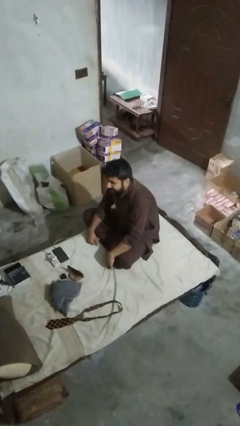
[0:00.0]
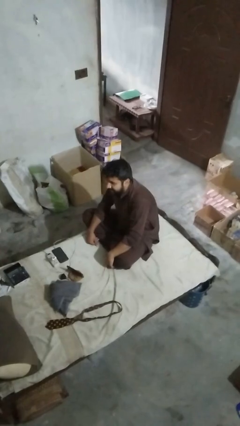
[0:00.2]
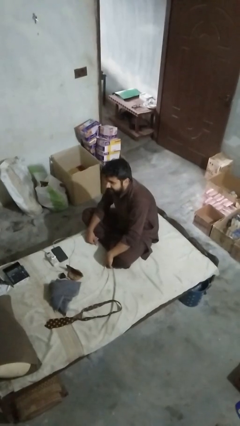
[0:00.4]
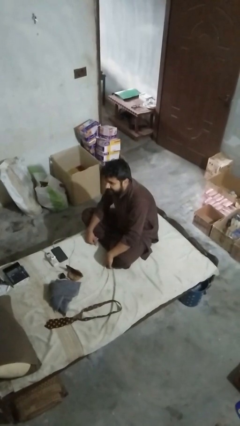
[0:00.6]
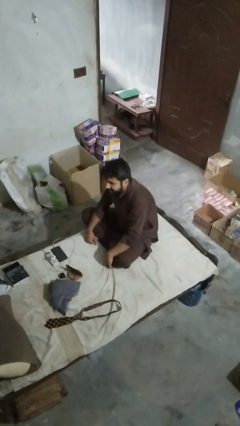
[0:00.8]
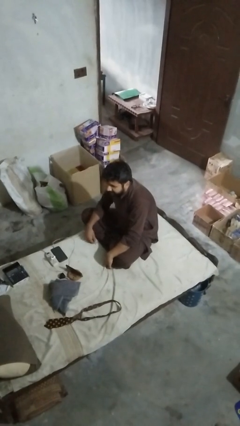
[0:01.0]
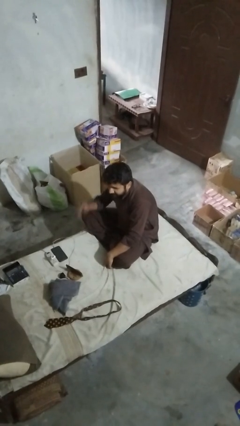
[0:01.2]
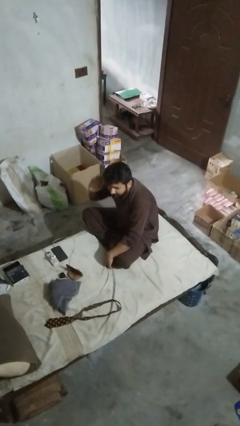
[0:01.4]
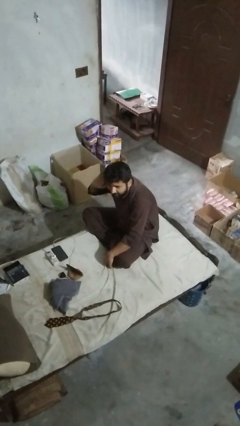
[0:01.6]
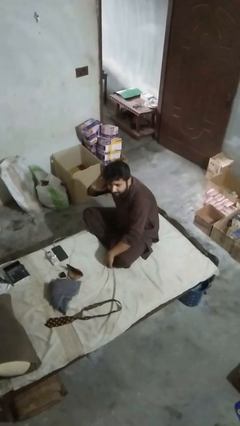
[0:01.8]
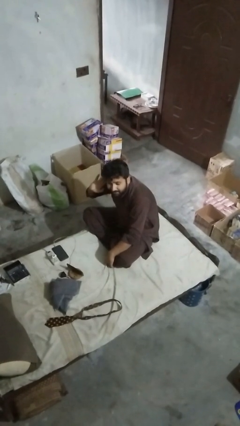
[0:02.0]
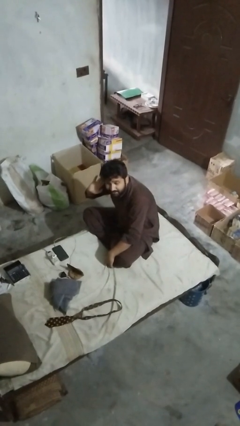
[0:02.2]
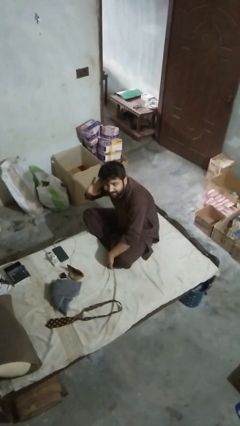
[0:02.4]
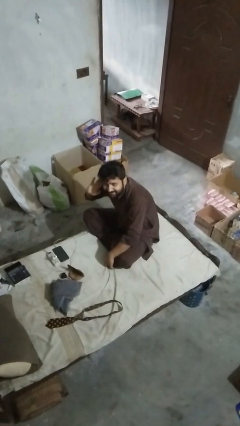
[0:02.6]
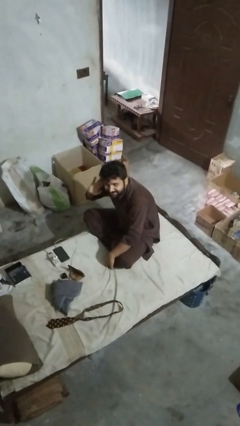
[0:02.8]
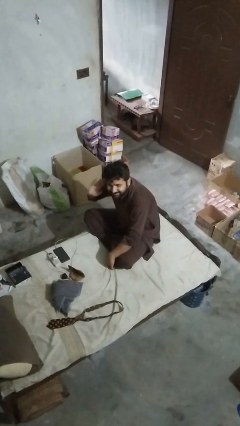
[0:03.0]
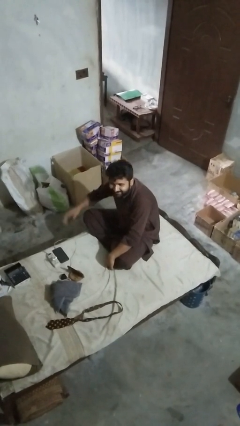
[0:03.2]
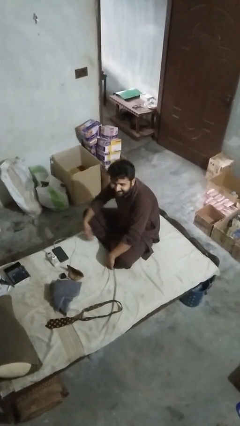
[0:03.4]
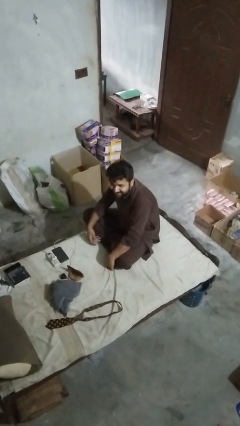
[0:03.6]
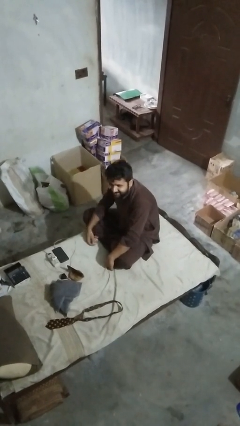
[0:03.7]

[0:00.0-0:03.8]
person gestures listen closely

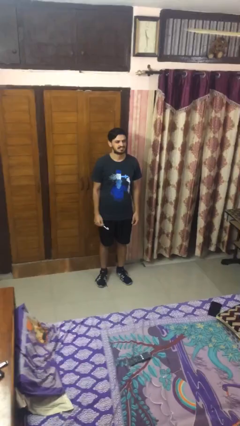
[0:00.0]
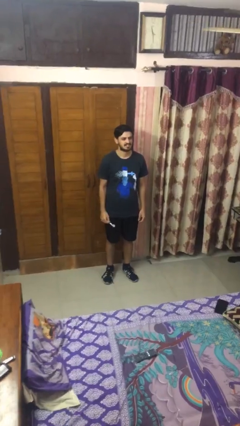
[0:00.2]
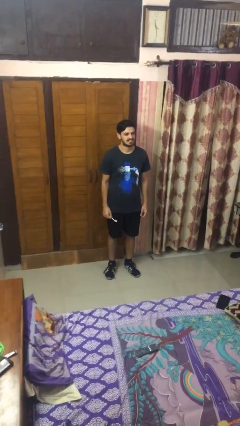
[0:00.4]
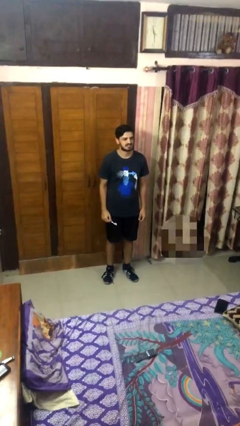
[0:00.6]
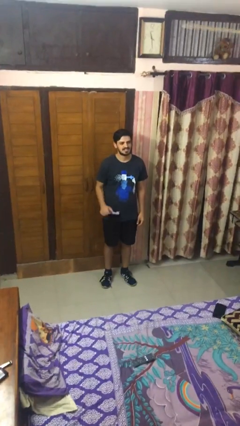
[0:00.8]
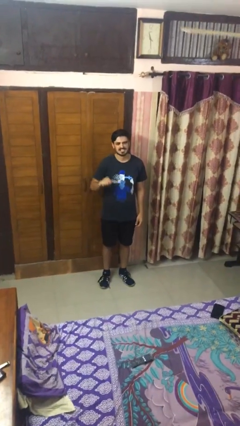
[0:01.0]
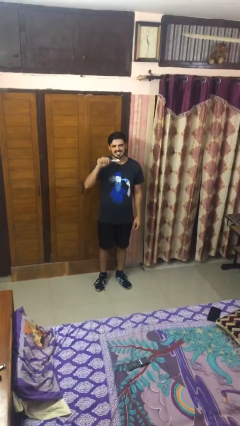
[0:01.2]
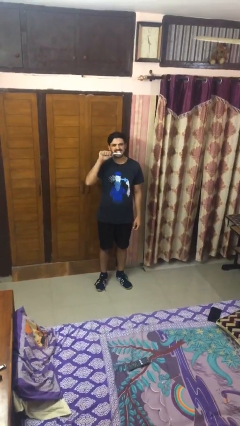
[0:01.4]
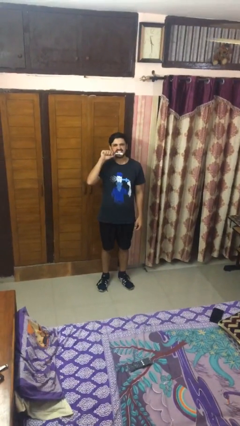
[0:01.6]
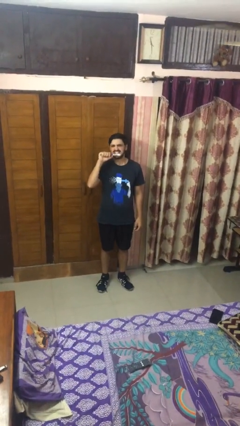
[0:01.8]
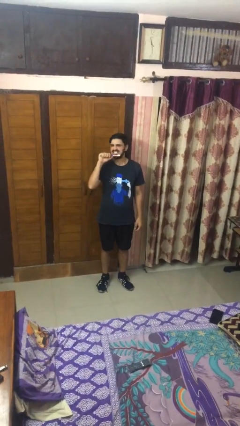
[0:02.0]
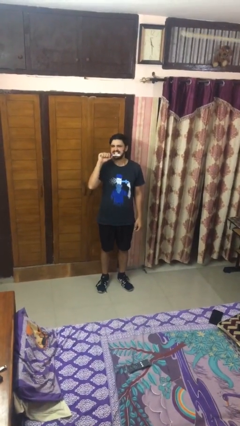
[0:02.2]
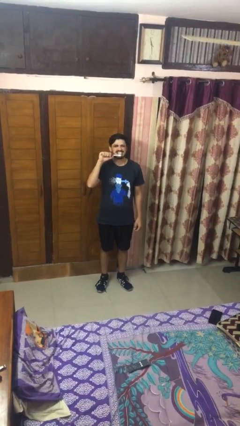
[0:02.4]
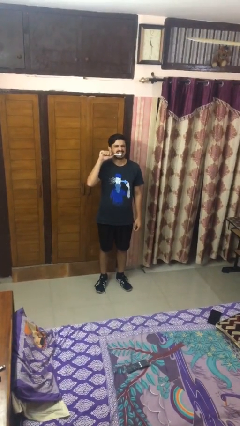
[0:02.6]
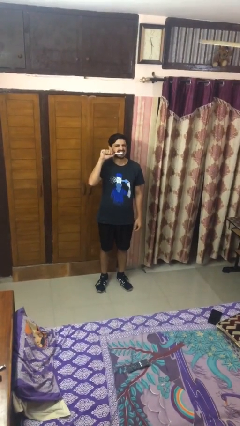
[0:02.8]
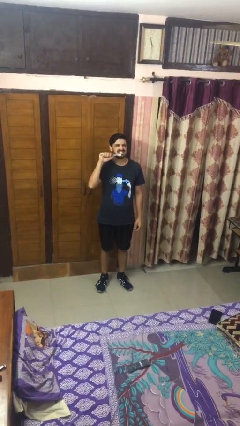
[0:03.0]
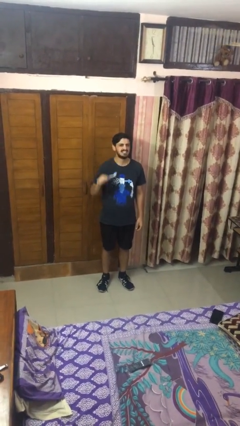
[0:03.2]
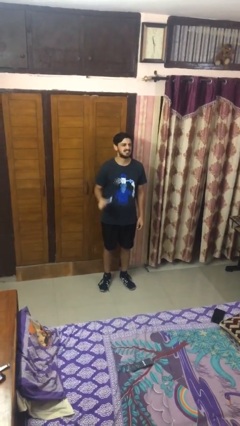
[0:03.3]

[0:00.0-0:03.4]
person brushes teeth

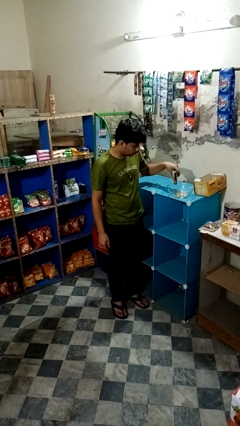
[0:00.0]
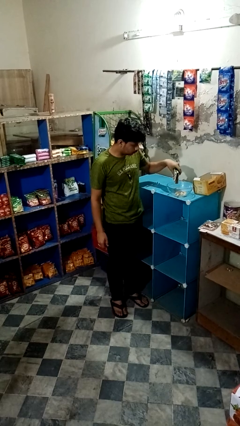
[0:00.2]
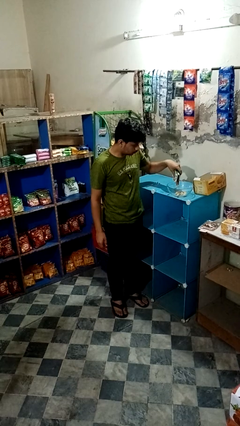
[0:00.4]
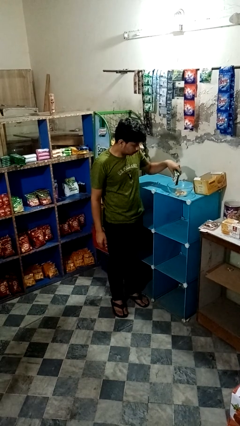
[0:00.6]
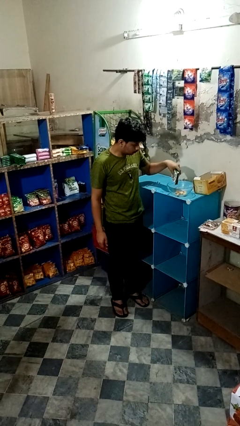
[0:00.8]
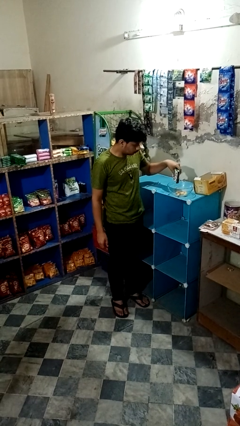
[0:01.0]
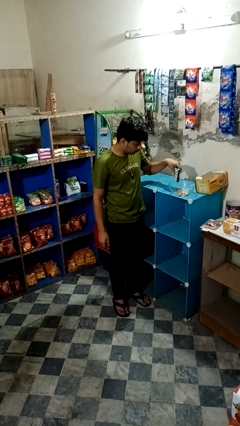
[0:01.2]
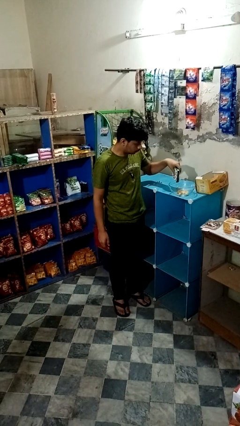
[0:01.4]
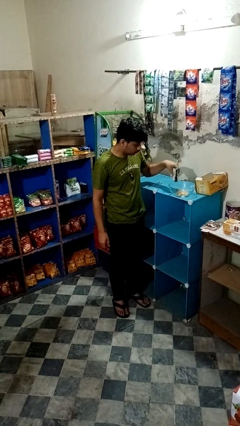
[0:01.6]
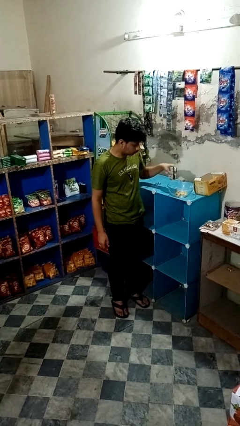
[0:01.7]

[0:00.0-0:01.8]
person pours into bowl

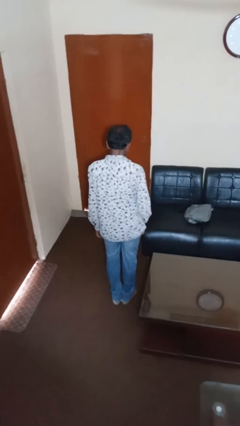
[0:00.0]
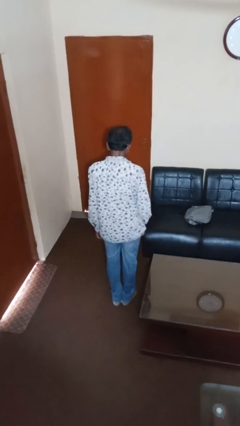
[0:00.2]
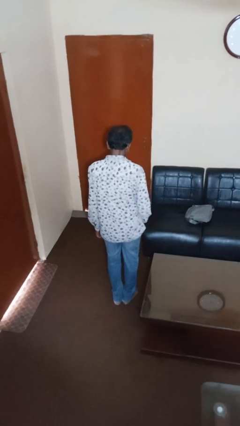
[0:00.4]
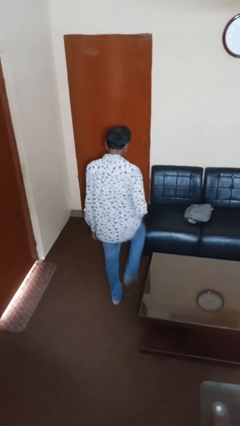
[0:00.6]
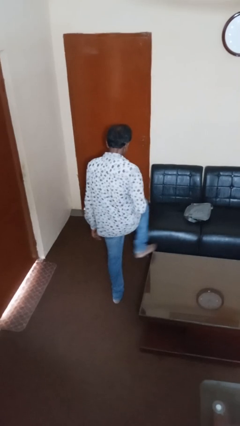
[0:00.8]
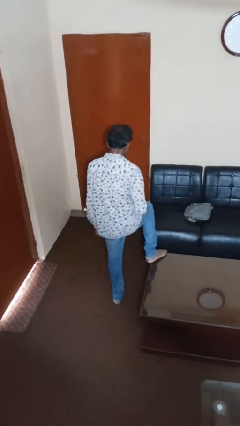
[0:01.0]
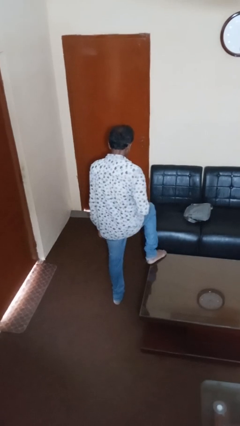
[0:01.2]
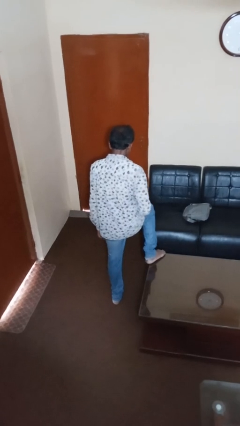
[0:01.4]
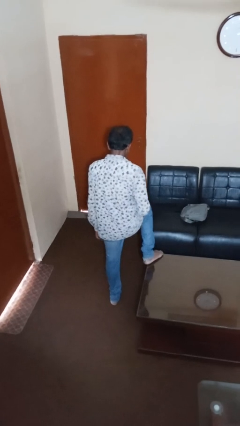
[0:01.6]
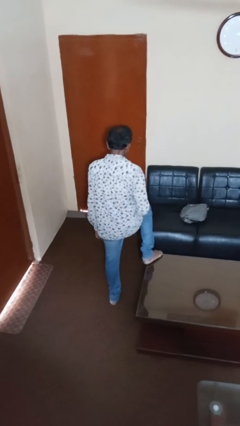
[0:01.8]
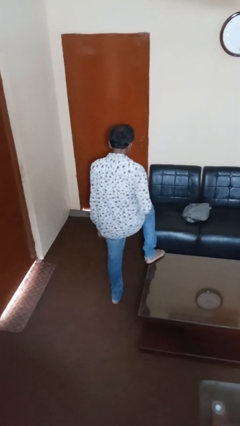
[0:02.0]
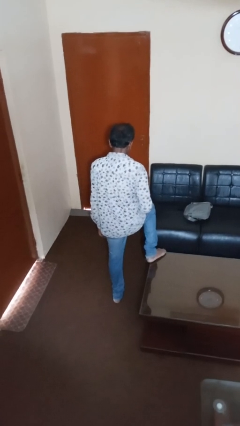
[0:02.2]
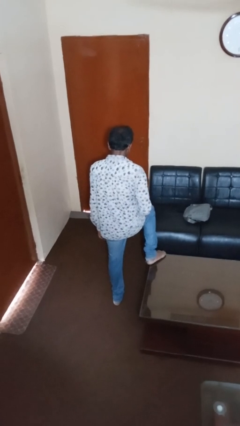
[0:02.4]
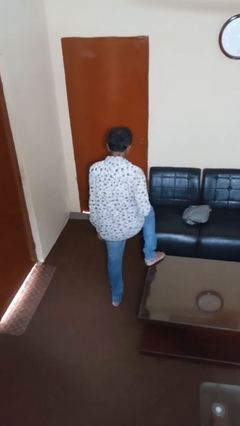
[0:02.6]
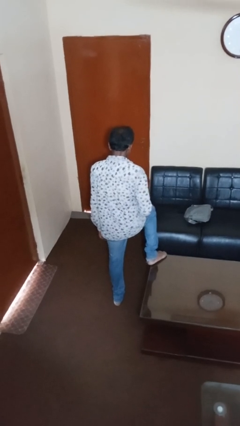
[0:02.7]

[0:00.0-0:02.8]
person puts feet up

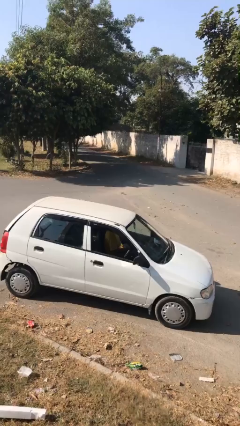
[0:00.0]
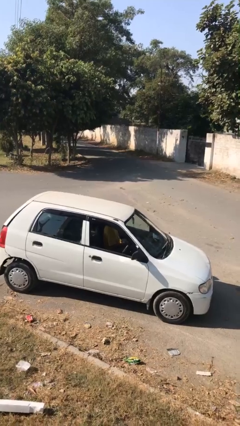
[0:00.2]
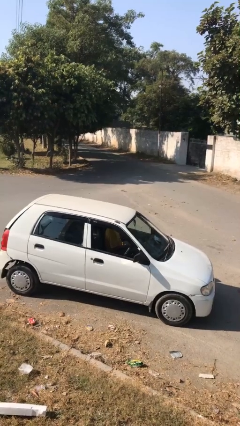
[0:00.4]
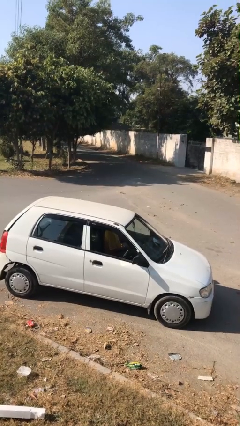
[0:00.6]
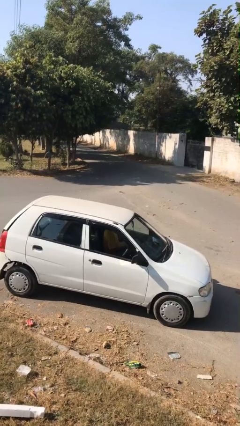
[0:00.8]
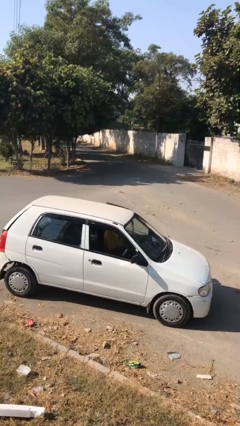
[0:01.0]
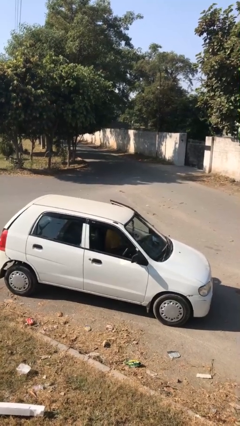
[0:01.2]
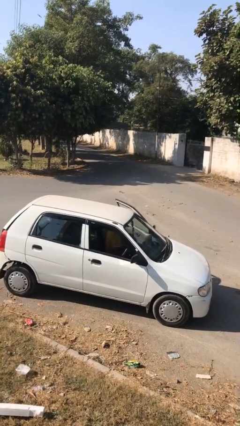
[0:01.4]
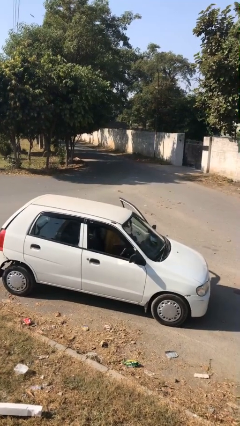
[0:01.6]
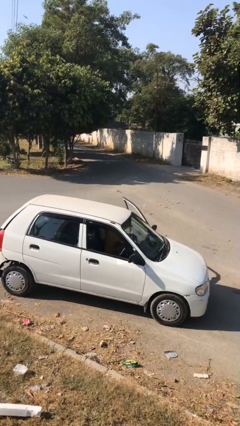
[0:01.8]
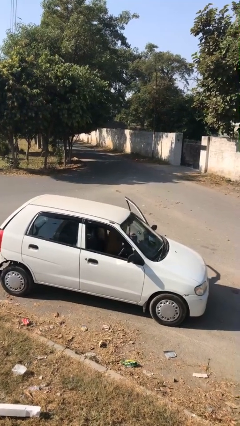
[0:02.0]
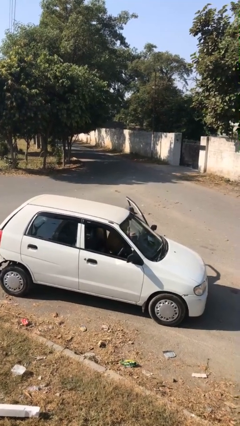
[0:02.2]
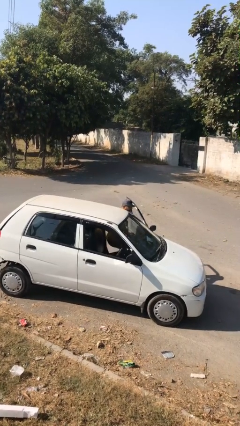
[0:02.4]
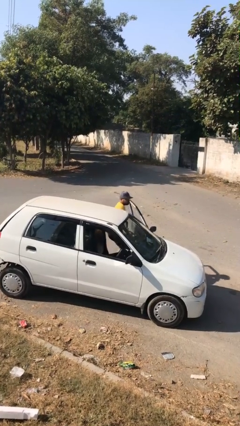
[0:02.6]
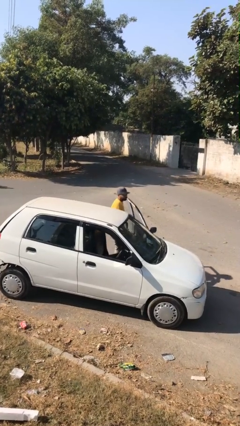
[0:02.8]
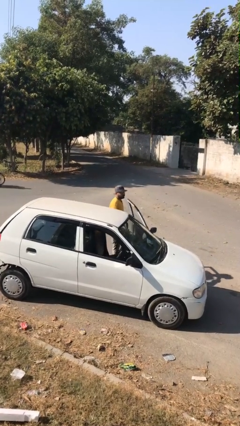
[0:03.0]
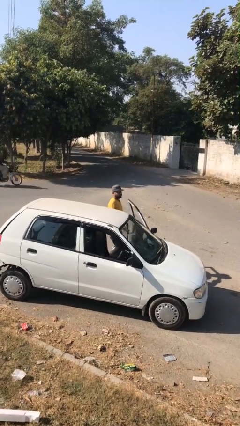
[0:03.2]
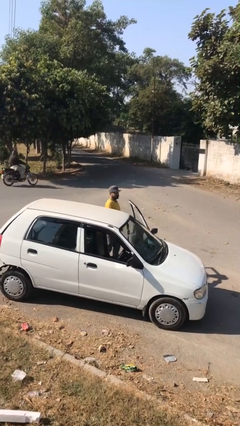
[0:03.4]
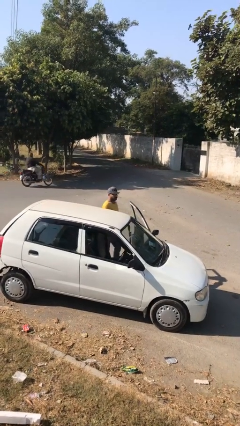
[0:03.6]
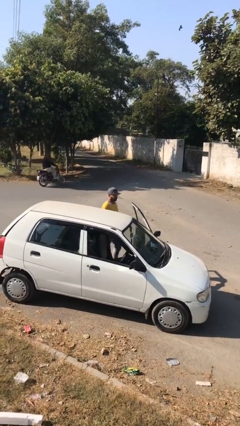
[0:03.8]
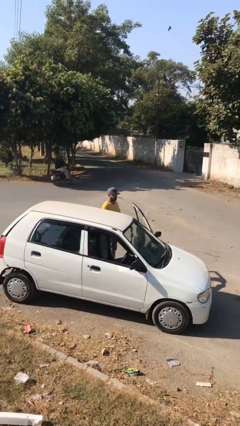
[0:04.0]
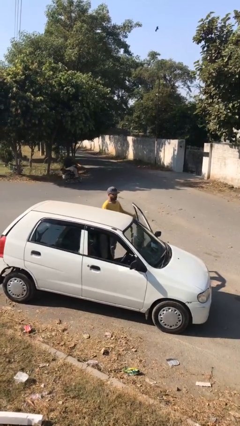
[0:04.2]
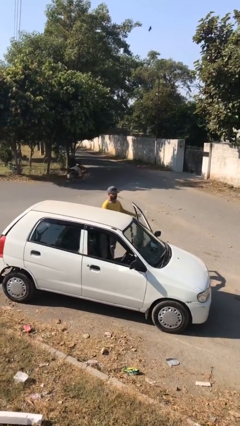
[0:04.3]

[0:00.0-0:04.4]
person exits car

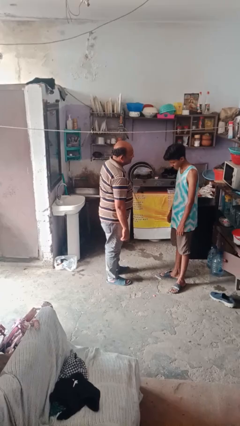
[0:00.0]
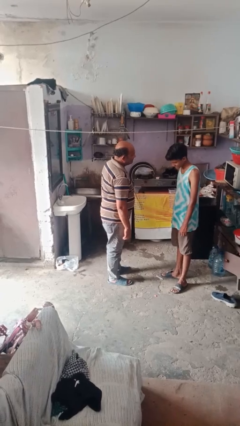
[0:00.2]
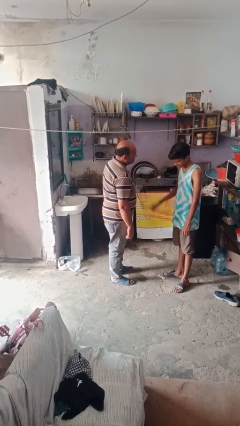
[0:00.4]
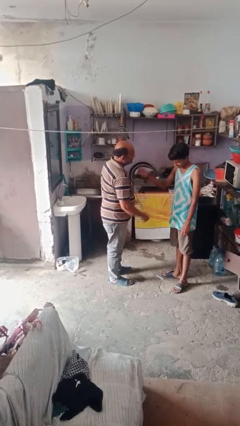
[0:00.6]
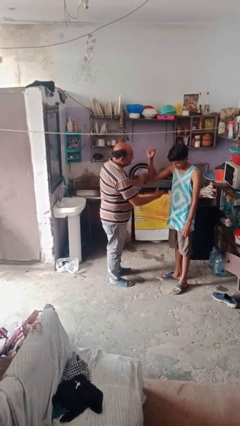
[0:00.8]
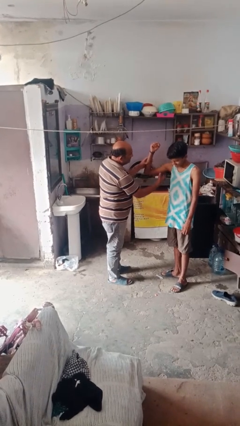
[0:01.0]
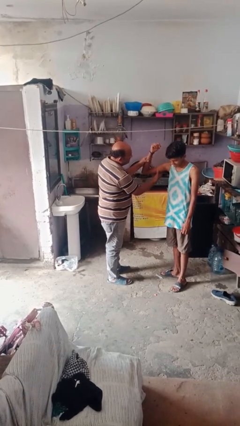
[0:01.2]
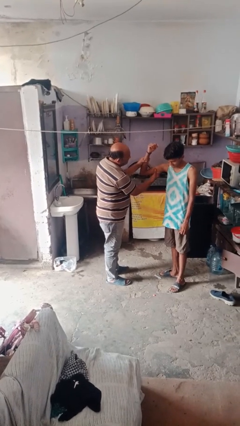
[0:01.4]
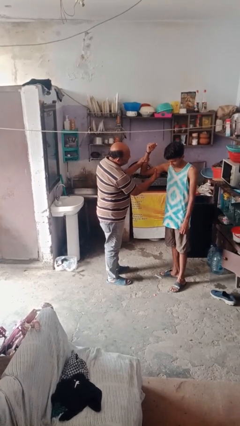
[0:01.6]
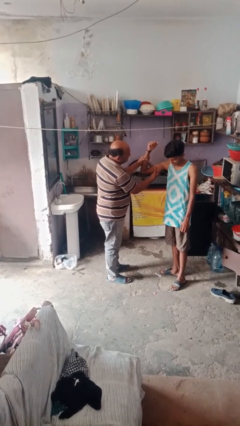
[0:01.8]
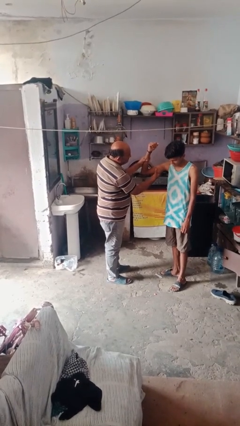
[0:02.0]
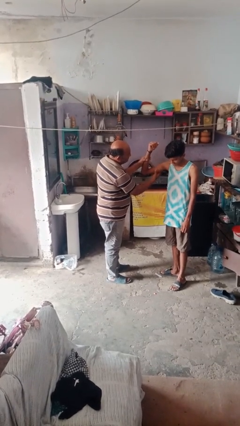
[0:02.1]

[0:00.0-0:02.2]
person grabs person by bicep
